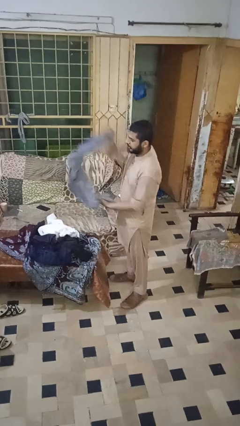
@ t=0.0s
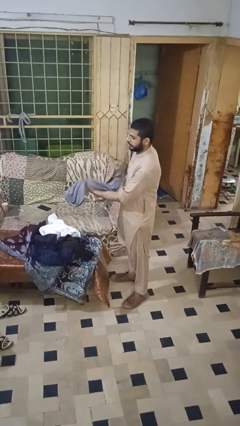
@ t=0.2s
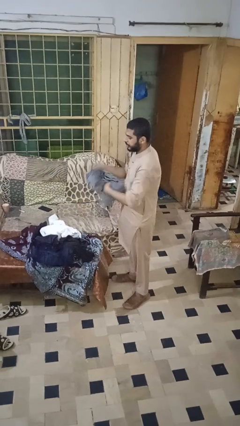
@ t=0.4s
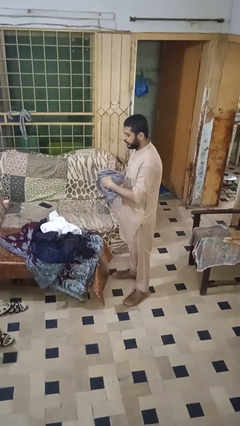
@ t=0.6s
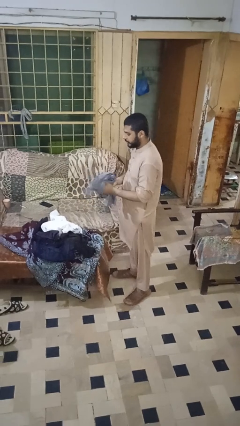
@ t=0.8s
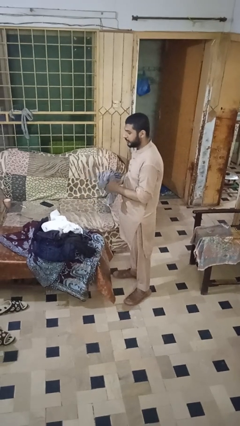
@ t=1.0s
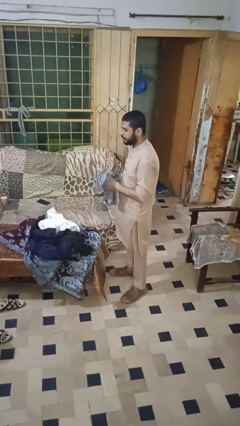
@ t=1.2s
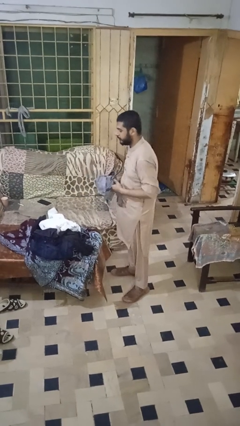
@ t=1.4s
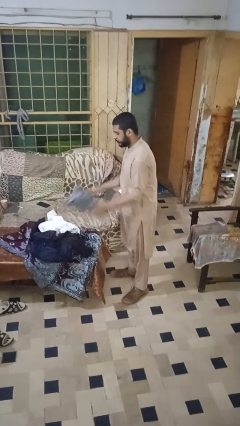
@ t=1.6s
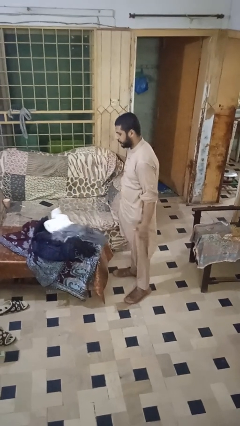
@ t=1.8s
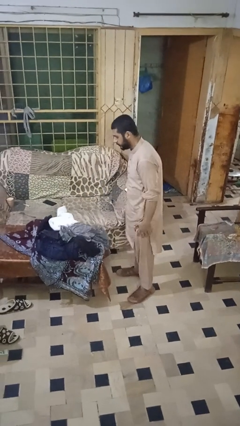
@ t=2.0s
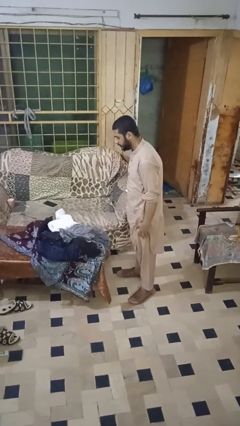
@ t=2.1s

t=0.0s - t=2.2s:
person folds pants

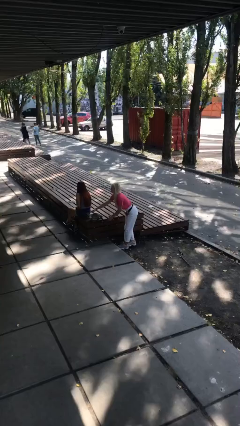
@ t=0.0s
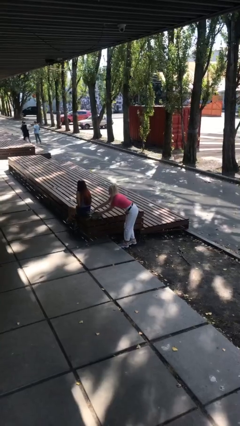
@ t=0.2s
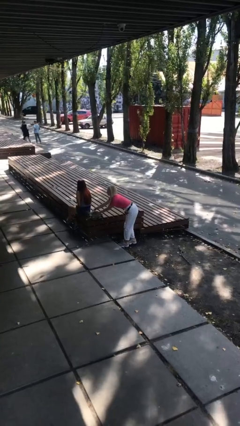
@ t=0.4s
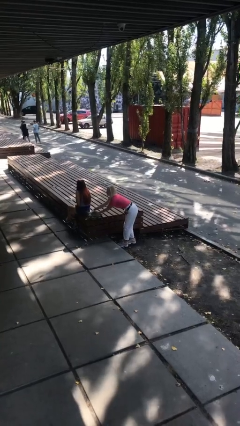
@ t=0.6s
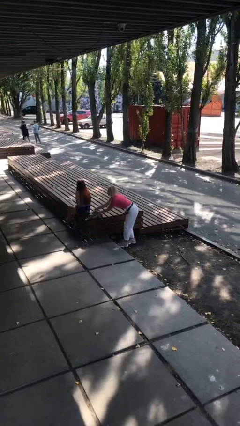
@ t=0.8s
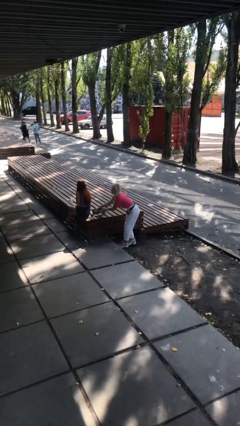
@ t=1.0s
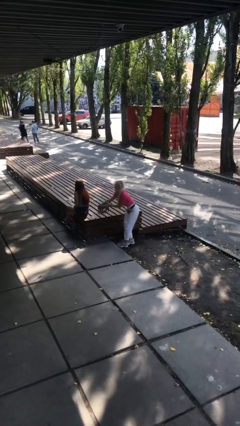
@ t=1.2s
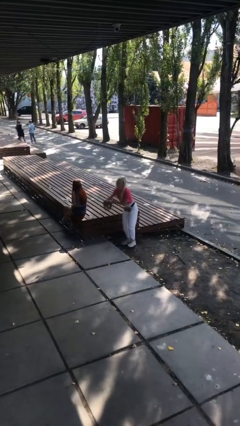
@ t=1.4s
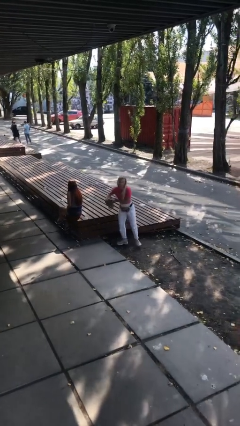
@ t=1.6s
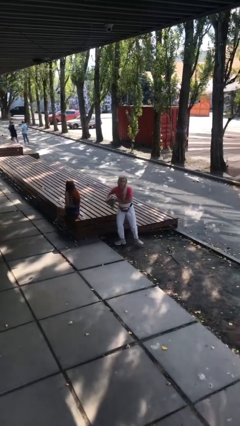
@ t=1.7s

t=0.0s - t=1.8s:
person steals object from person

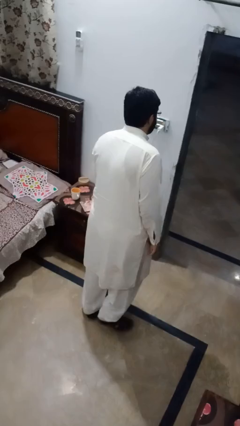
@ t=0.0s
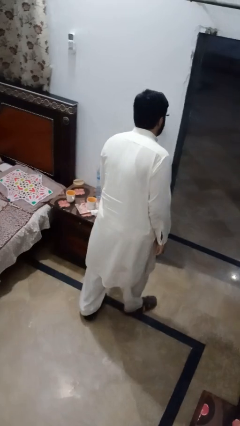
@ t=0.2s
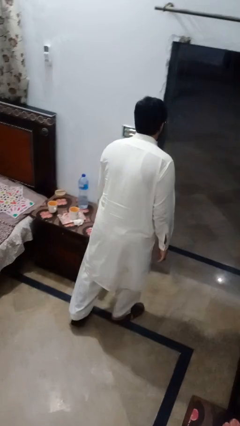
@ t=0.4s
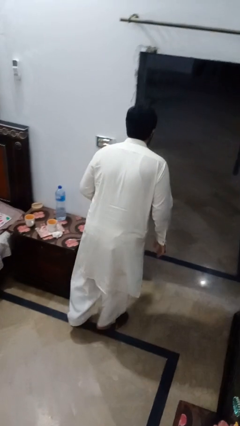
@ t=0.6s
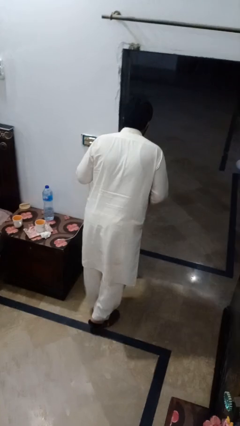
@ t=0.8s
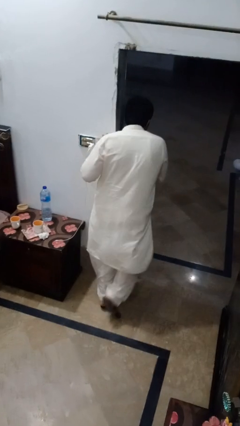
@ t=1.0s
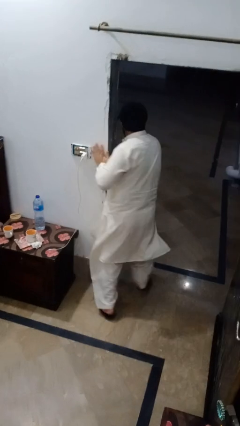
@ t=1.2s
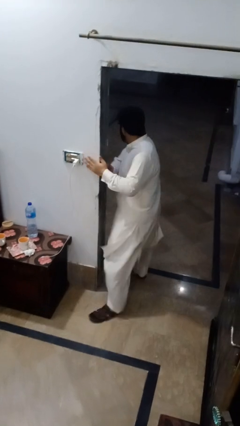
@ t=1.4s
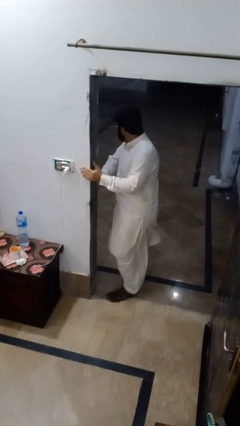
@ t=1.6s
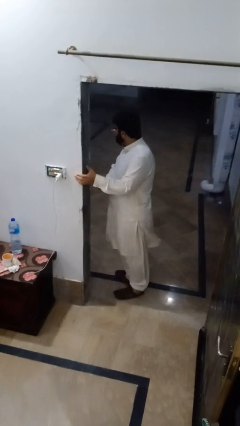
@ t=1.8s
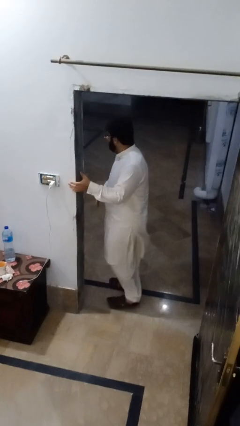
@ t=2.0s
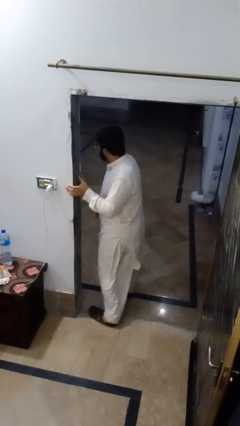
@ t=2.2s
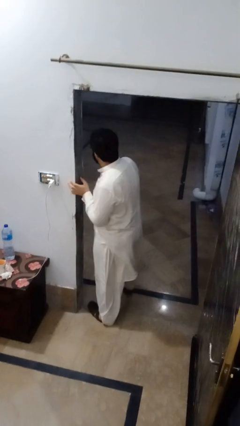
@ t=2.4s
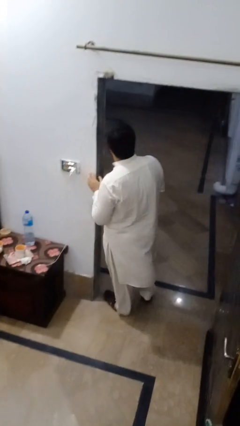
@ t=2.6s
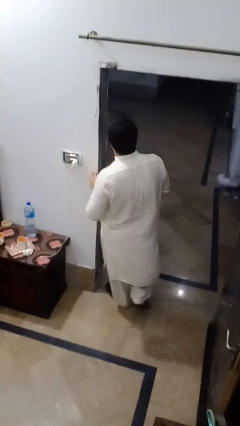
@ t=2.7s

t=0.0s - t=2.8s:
person bumps into wall

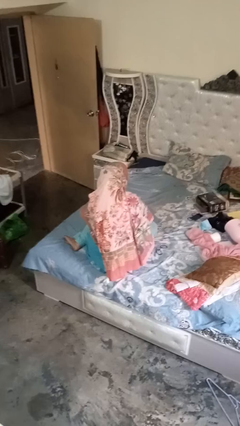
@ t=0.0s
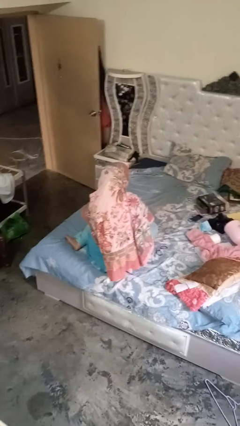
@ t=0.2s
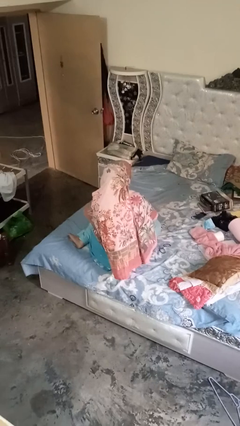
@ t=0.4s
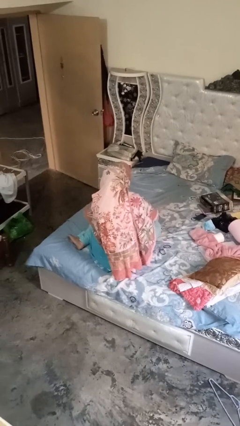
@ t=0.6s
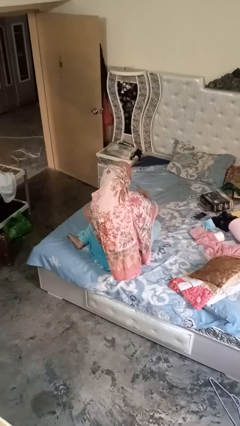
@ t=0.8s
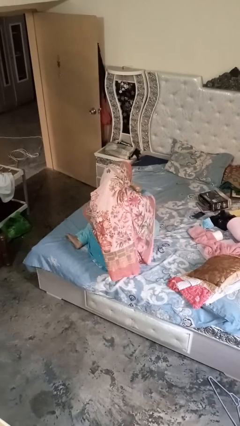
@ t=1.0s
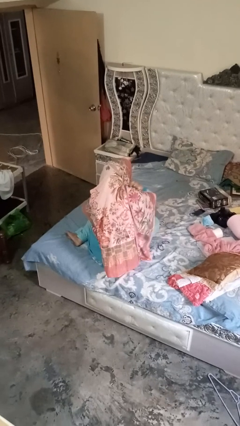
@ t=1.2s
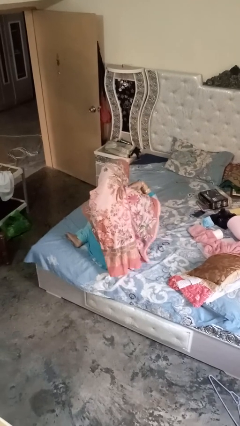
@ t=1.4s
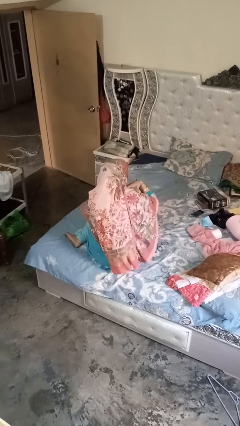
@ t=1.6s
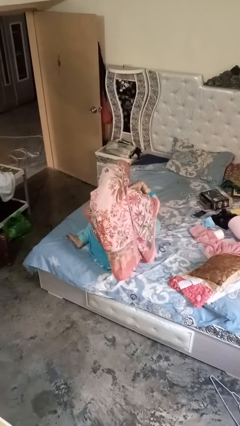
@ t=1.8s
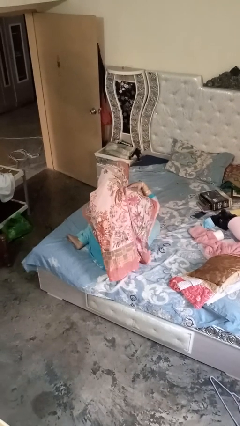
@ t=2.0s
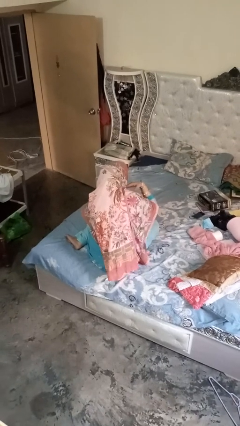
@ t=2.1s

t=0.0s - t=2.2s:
person gestures cut

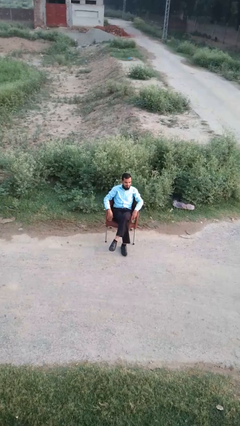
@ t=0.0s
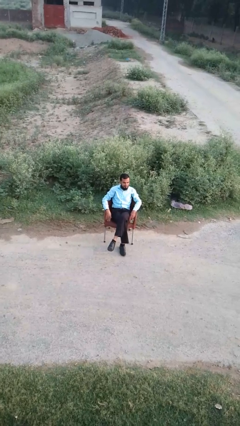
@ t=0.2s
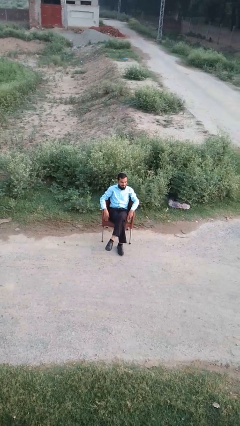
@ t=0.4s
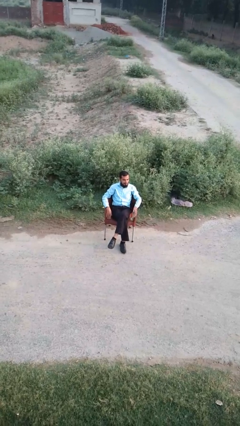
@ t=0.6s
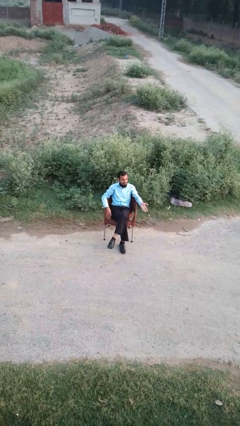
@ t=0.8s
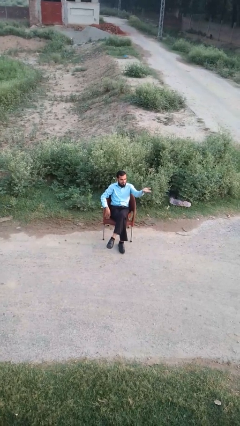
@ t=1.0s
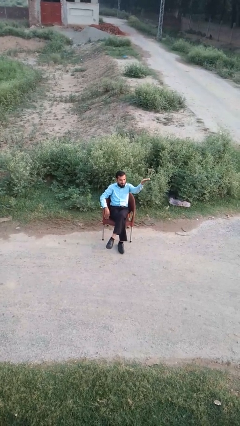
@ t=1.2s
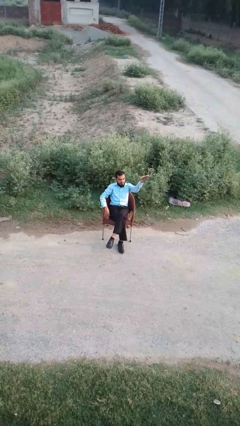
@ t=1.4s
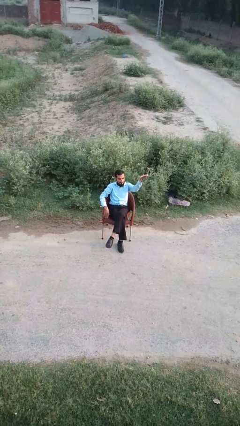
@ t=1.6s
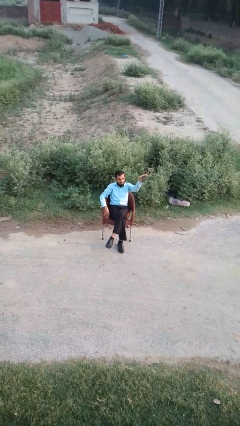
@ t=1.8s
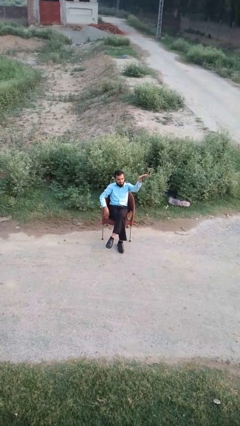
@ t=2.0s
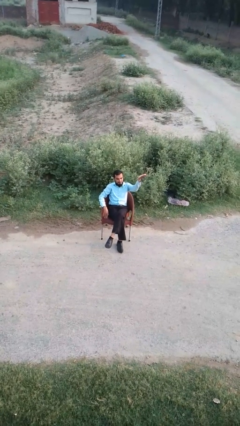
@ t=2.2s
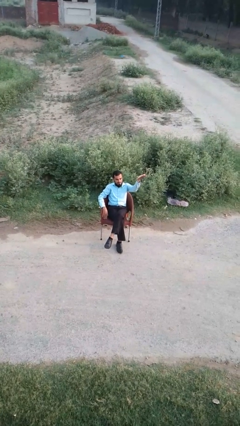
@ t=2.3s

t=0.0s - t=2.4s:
person gestures swipe up

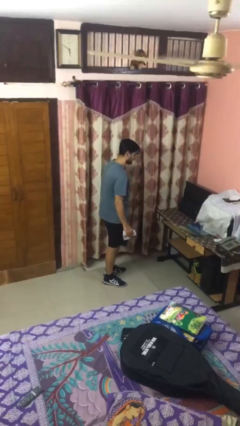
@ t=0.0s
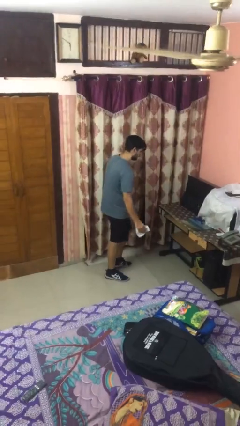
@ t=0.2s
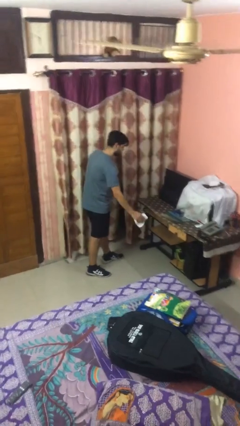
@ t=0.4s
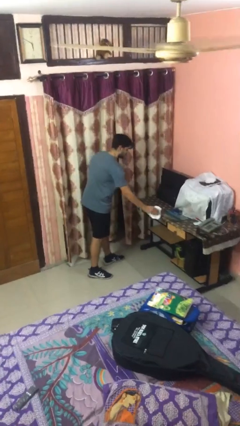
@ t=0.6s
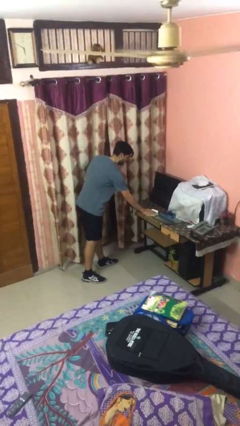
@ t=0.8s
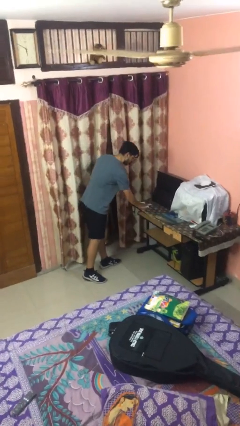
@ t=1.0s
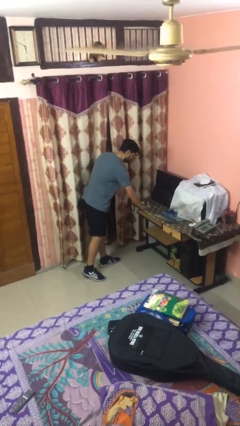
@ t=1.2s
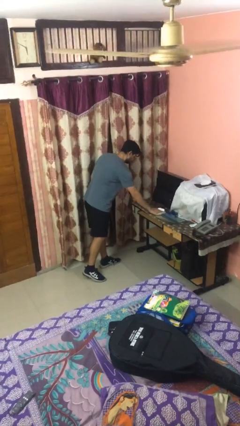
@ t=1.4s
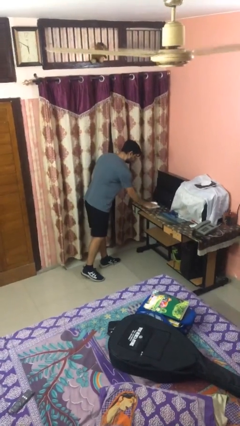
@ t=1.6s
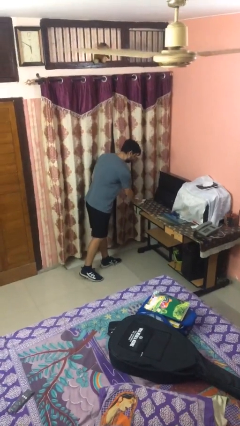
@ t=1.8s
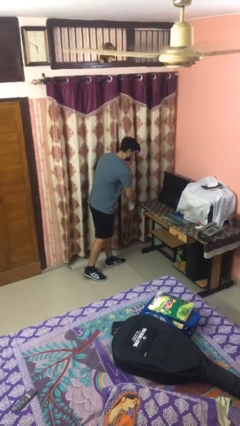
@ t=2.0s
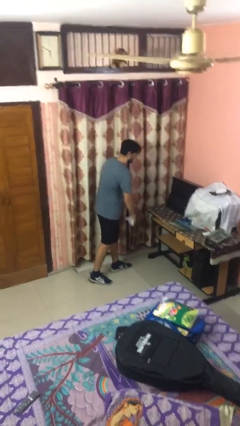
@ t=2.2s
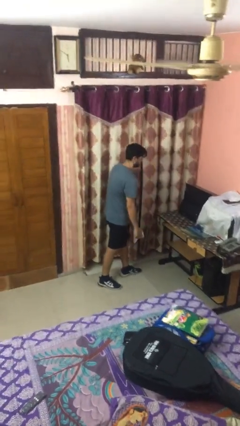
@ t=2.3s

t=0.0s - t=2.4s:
person cleans table with rag

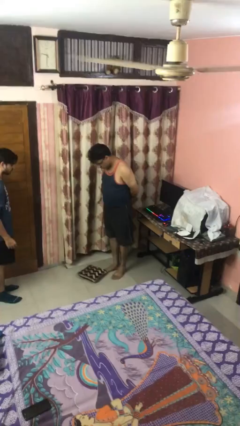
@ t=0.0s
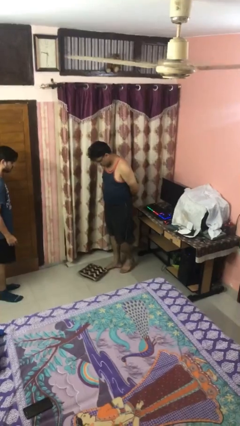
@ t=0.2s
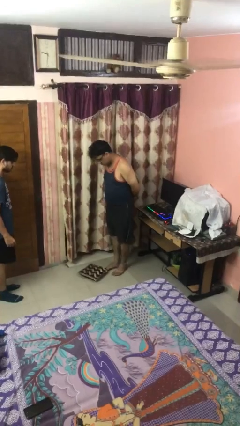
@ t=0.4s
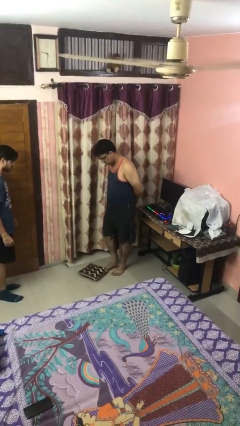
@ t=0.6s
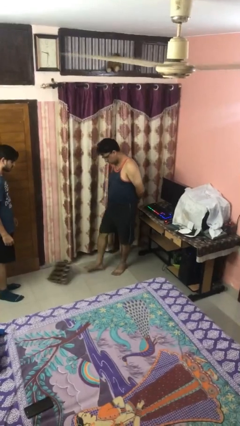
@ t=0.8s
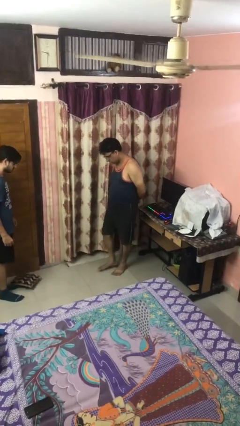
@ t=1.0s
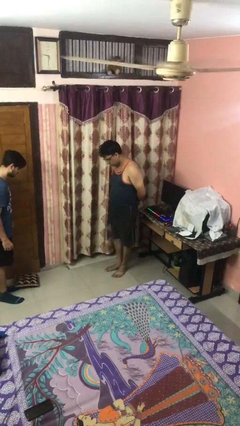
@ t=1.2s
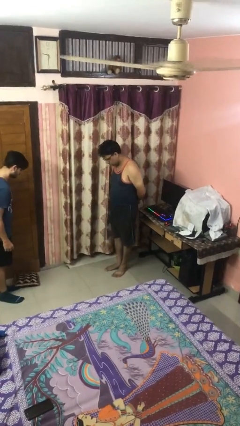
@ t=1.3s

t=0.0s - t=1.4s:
person kicks object to person

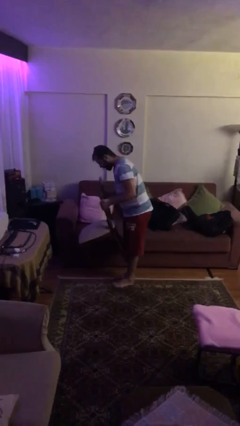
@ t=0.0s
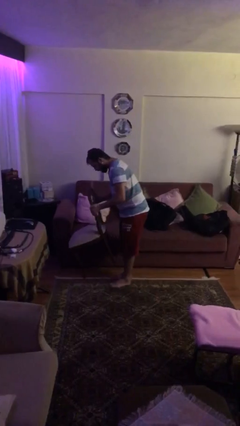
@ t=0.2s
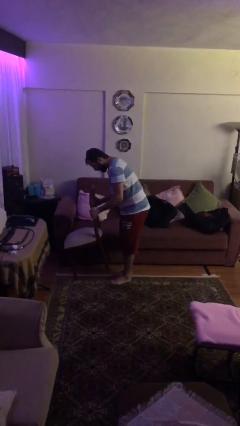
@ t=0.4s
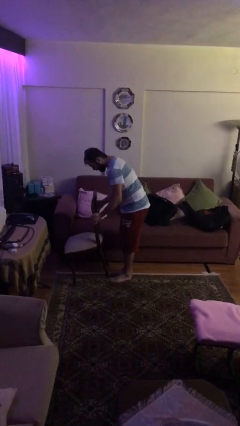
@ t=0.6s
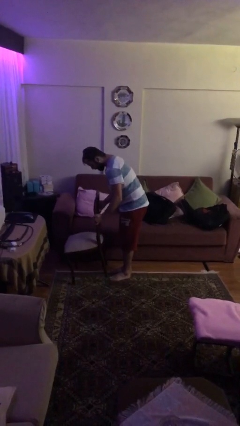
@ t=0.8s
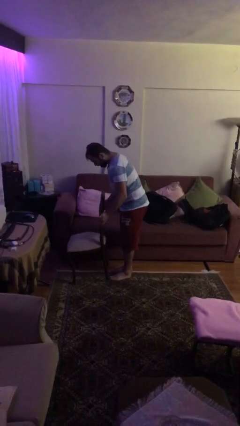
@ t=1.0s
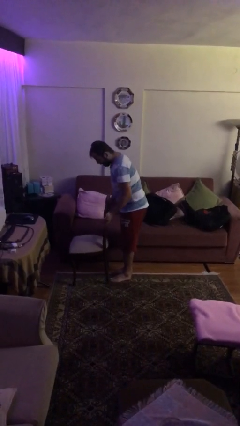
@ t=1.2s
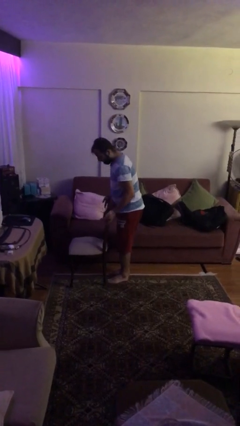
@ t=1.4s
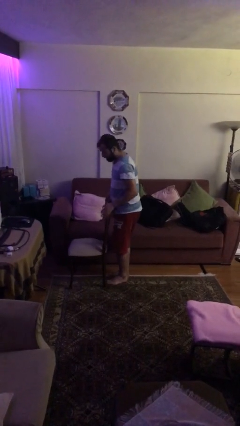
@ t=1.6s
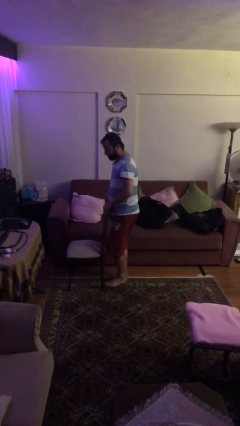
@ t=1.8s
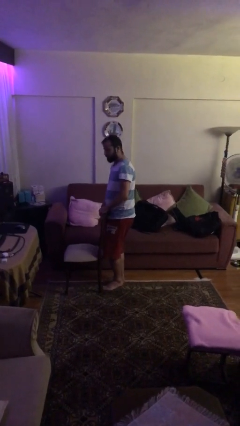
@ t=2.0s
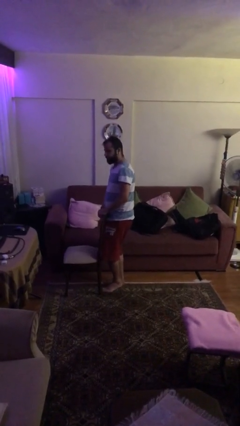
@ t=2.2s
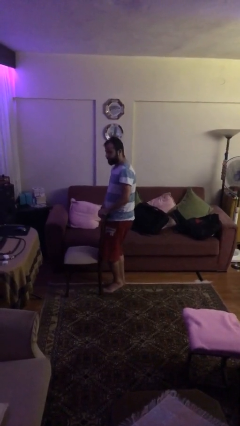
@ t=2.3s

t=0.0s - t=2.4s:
person puts down object on floor
